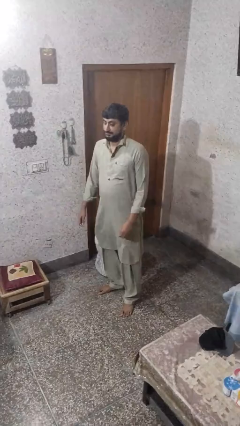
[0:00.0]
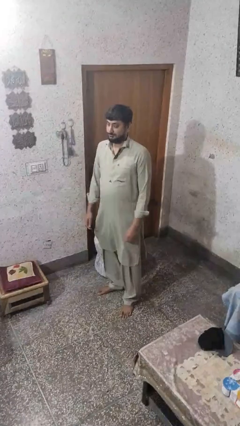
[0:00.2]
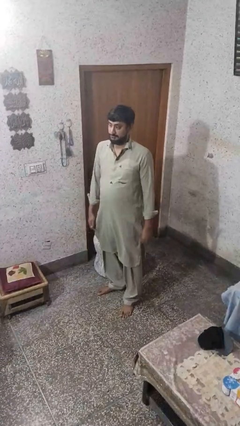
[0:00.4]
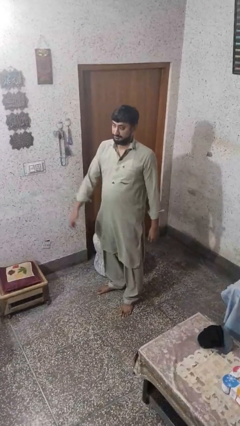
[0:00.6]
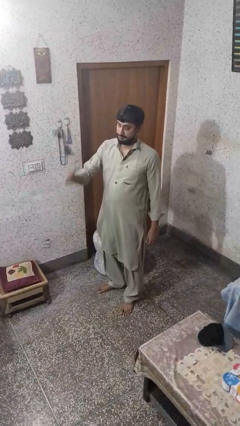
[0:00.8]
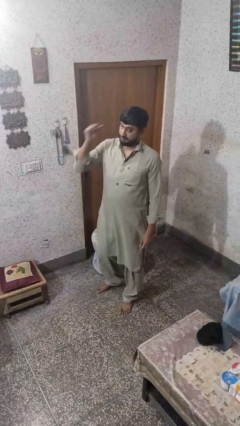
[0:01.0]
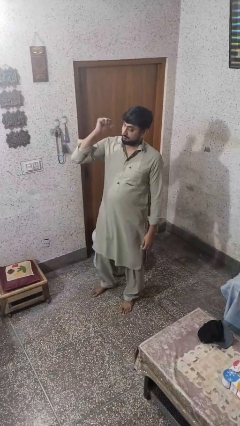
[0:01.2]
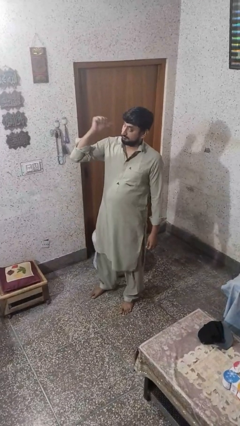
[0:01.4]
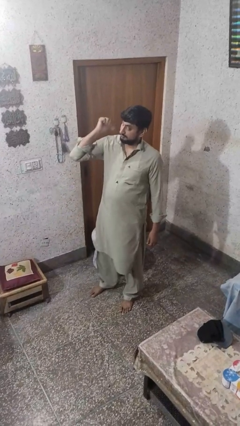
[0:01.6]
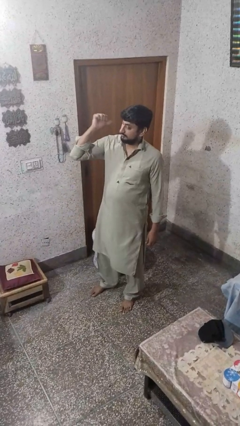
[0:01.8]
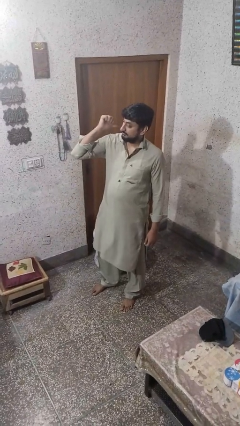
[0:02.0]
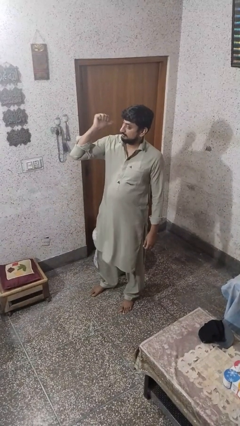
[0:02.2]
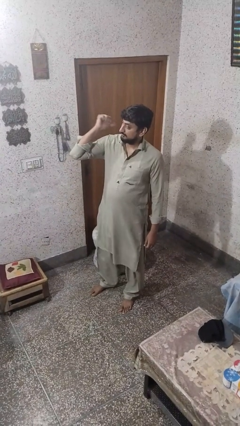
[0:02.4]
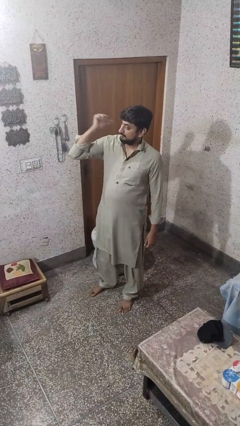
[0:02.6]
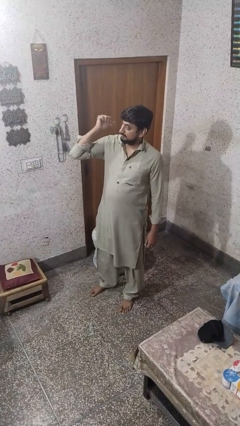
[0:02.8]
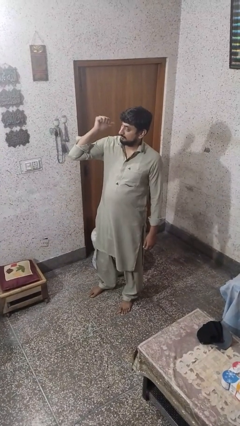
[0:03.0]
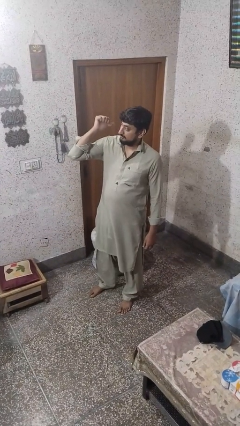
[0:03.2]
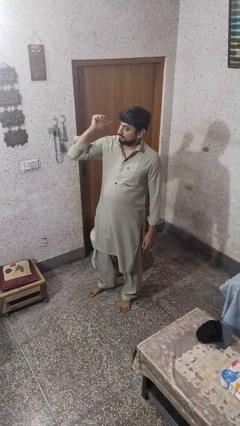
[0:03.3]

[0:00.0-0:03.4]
person gestures behind me

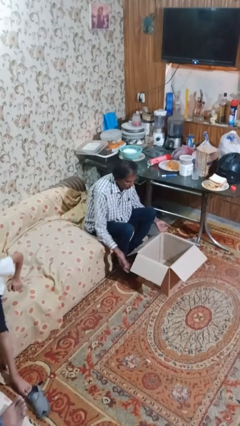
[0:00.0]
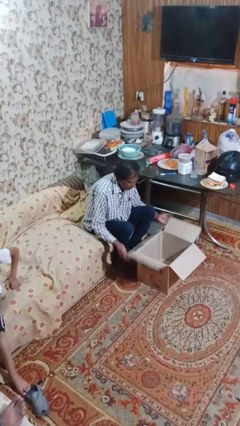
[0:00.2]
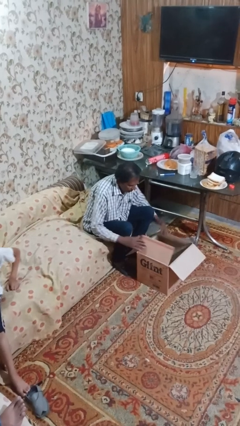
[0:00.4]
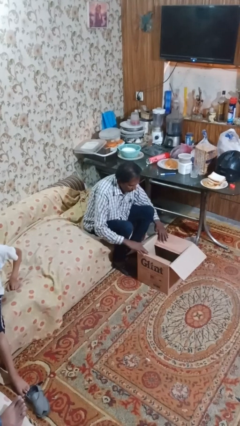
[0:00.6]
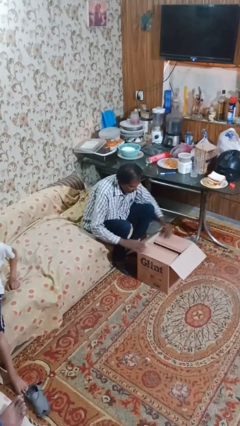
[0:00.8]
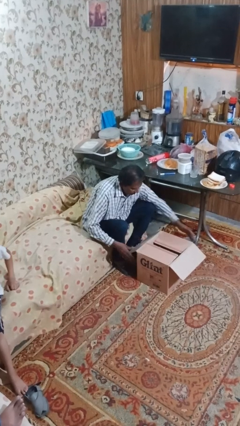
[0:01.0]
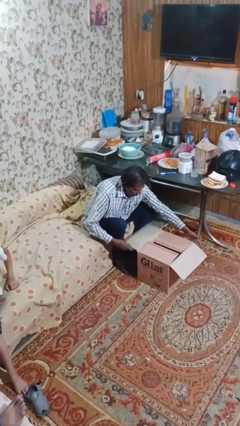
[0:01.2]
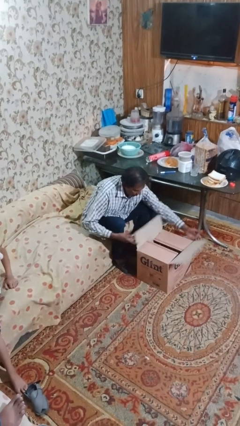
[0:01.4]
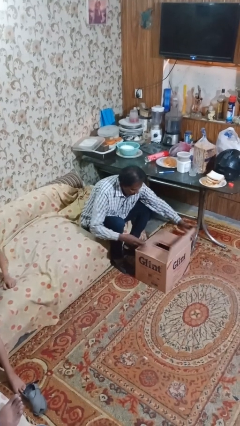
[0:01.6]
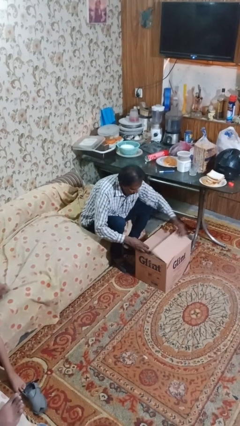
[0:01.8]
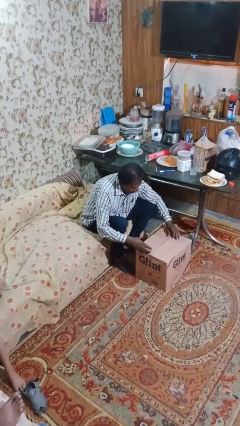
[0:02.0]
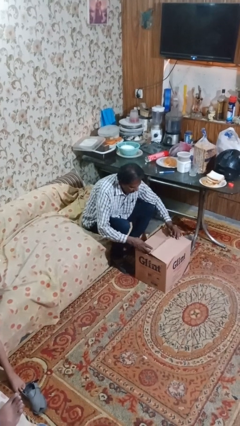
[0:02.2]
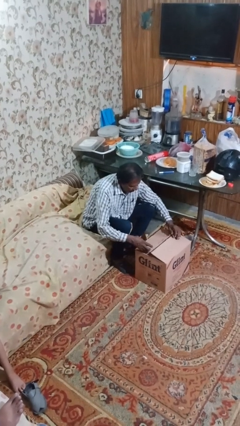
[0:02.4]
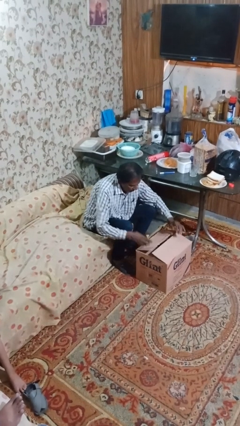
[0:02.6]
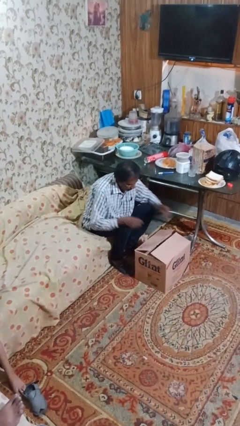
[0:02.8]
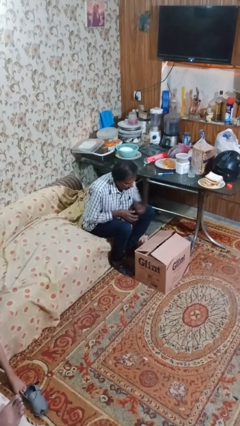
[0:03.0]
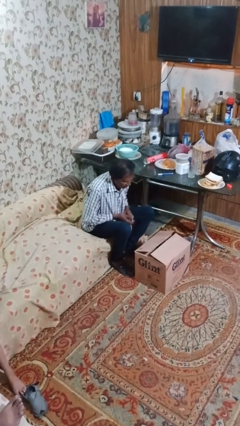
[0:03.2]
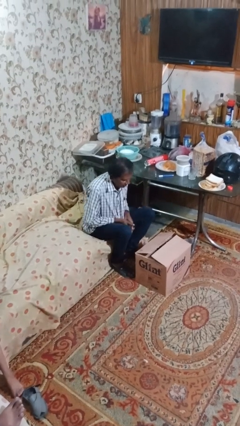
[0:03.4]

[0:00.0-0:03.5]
person closes box

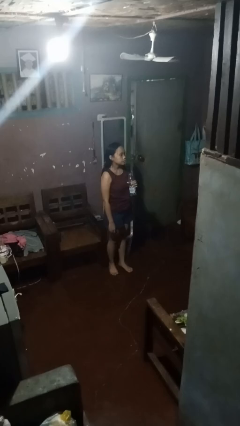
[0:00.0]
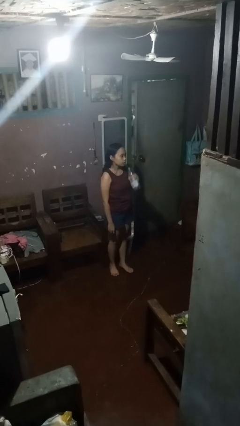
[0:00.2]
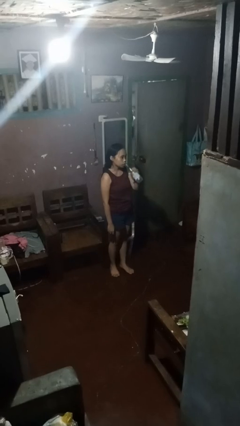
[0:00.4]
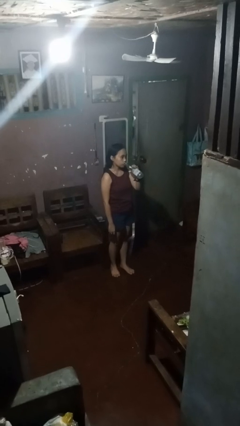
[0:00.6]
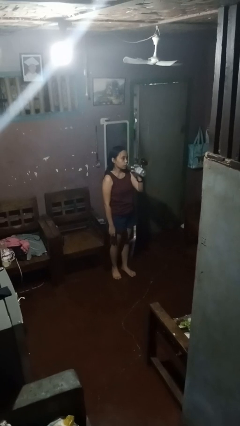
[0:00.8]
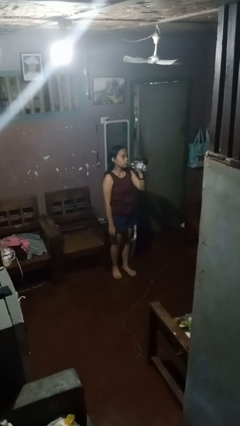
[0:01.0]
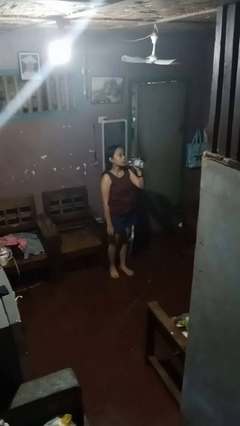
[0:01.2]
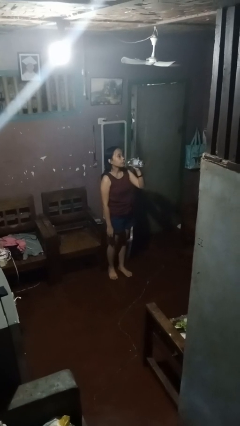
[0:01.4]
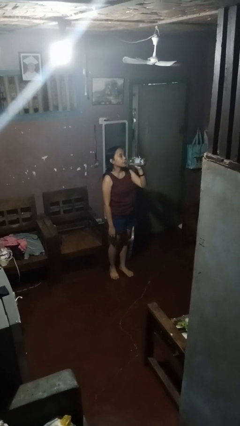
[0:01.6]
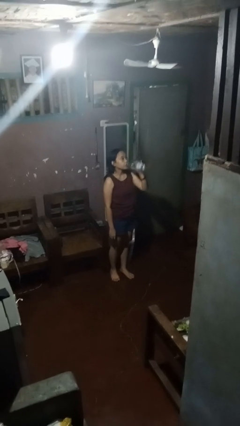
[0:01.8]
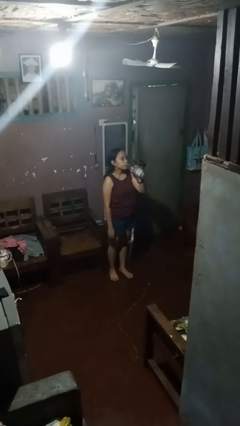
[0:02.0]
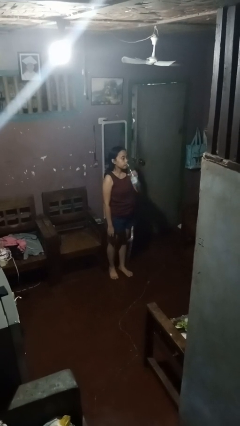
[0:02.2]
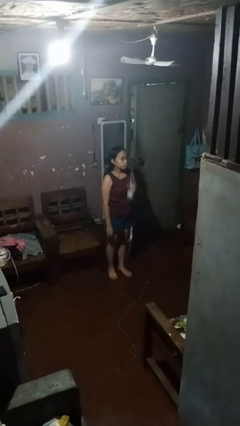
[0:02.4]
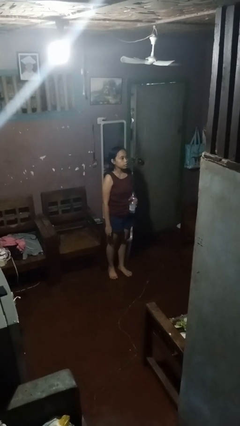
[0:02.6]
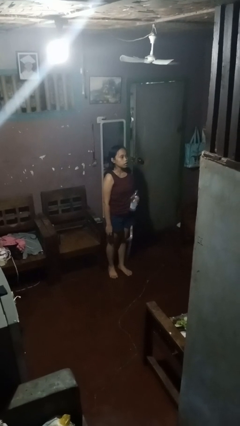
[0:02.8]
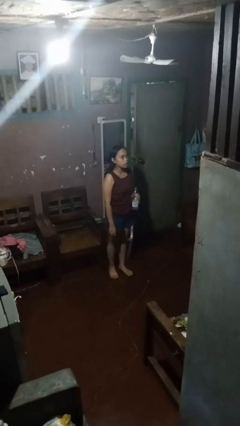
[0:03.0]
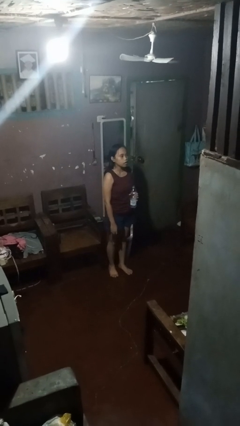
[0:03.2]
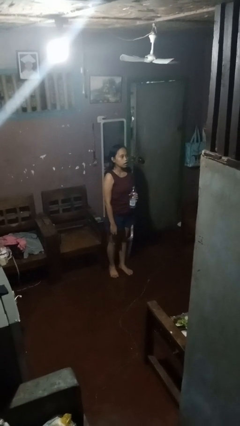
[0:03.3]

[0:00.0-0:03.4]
person drinks from bottle

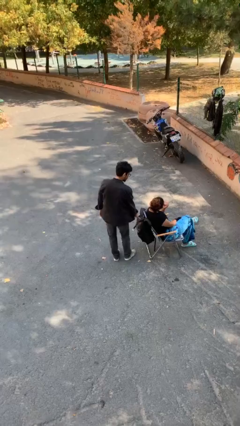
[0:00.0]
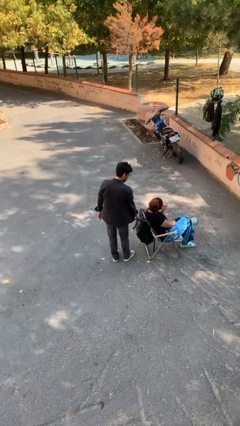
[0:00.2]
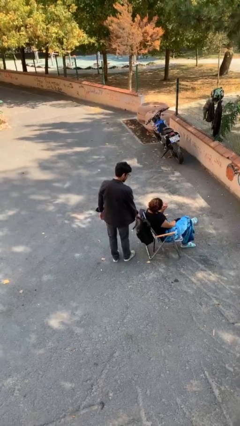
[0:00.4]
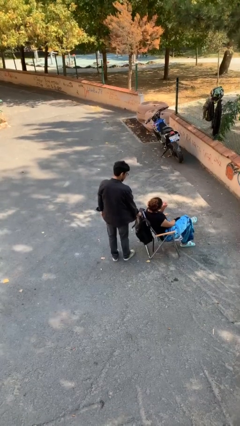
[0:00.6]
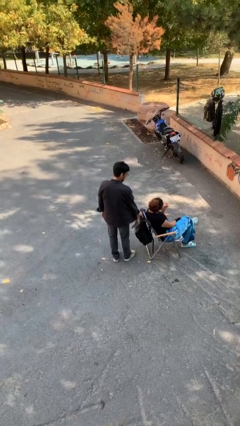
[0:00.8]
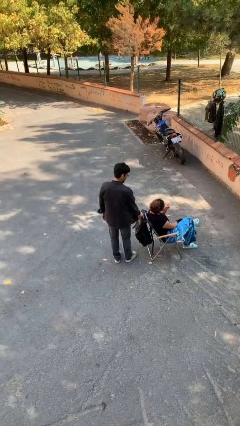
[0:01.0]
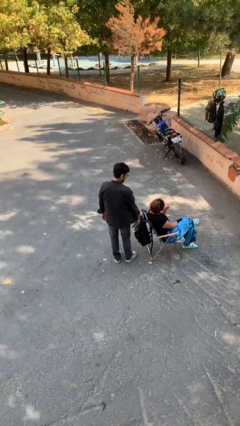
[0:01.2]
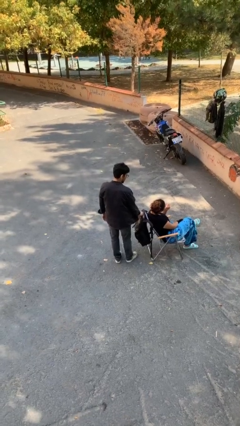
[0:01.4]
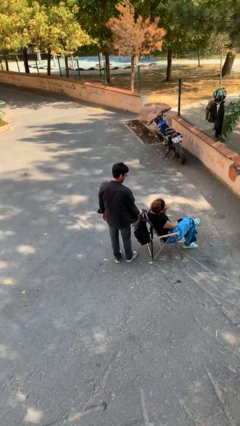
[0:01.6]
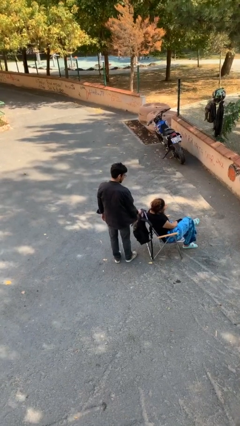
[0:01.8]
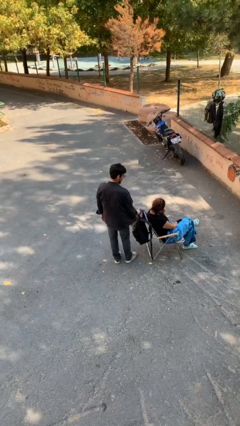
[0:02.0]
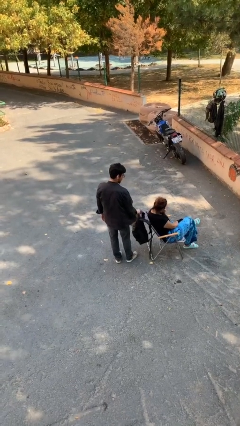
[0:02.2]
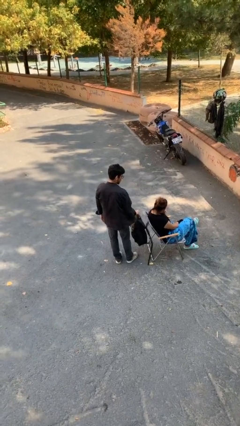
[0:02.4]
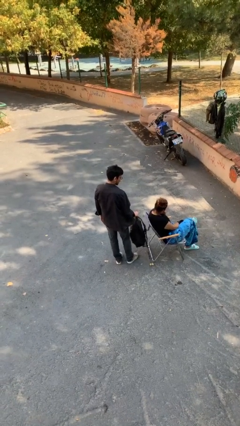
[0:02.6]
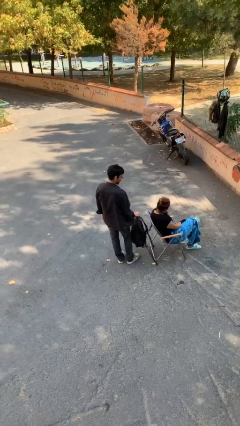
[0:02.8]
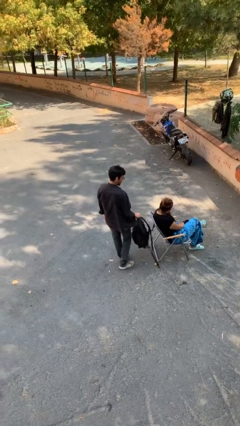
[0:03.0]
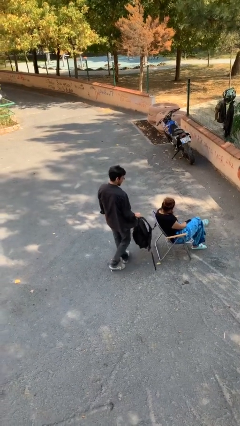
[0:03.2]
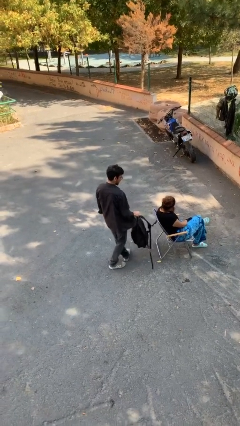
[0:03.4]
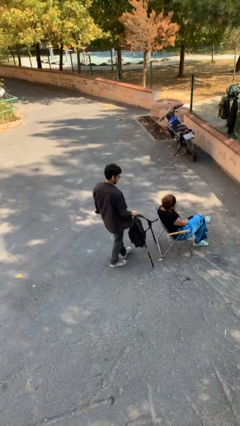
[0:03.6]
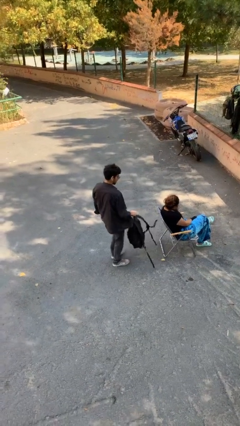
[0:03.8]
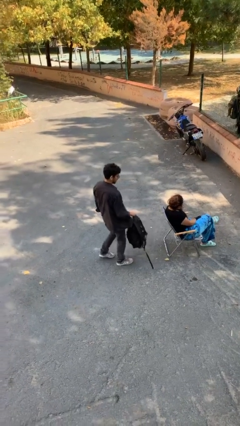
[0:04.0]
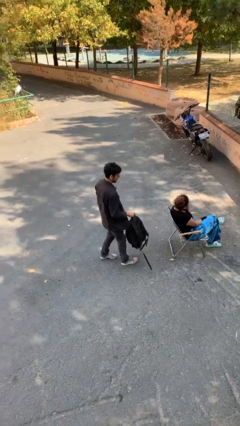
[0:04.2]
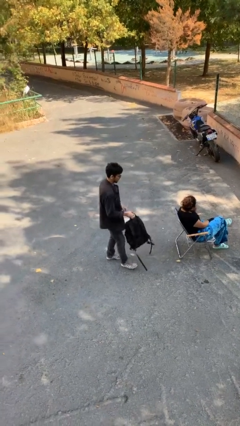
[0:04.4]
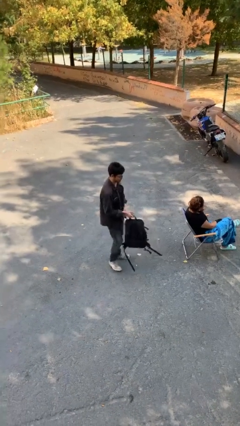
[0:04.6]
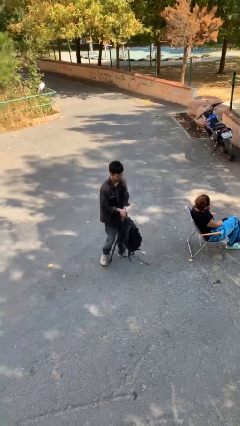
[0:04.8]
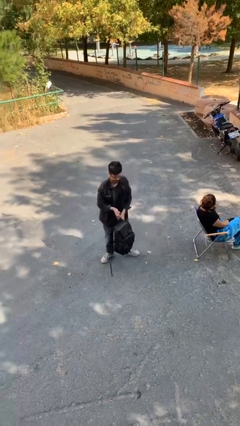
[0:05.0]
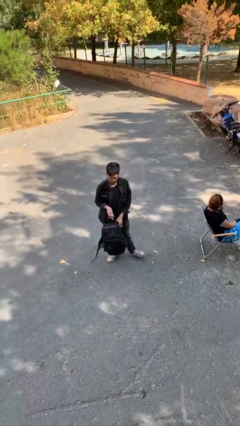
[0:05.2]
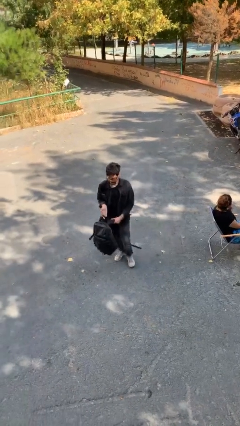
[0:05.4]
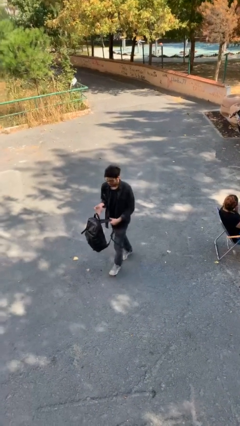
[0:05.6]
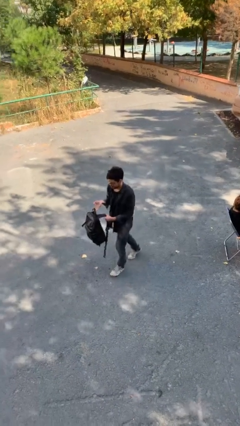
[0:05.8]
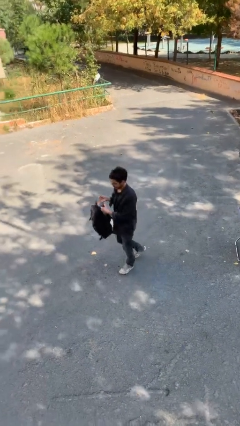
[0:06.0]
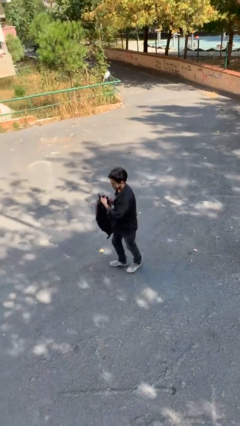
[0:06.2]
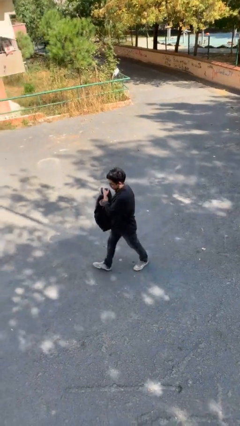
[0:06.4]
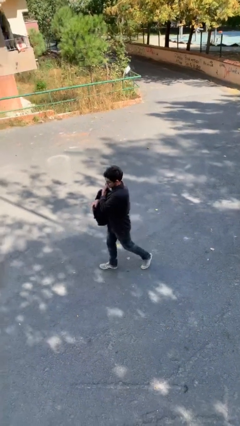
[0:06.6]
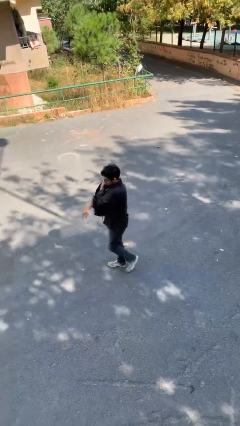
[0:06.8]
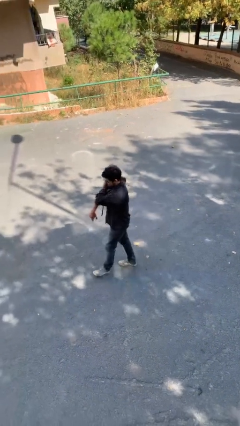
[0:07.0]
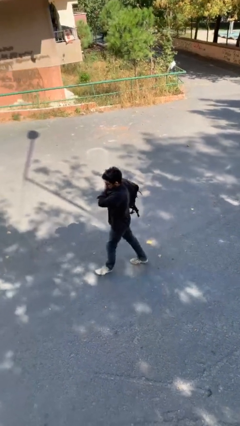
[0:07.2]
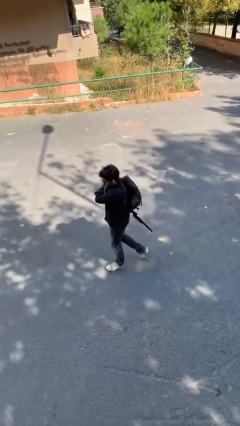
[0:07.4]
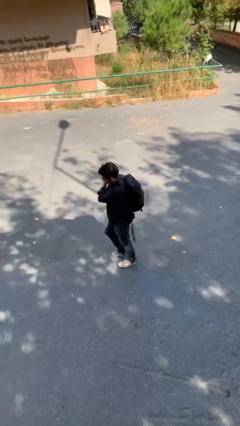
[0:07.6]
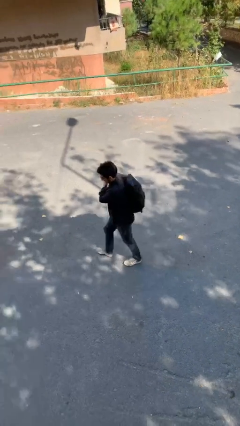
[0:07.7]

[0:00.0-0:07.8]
person steals object from person

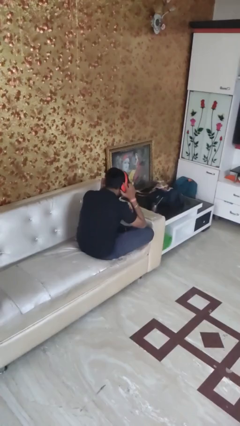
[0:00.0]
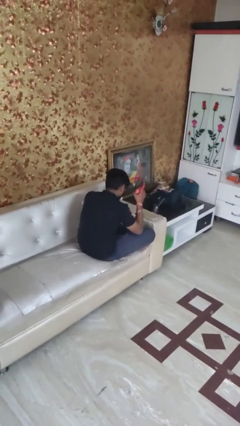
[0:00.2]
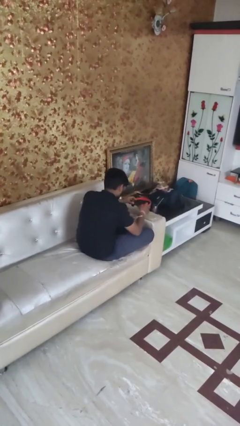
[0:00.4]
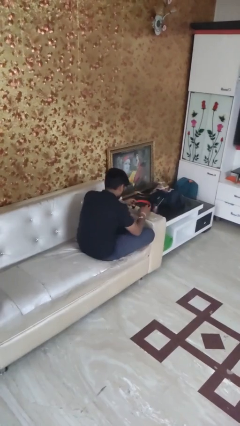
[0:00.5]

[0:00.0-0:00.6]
person takes off headphones
